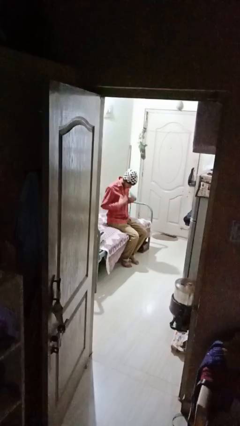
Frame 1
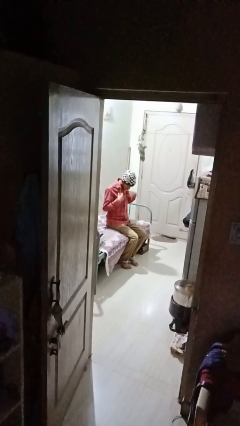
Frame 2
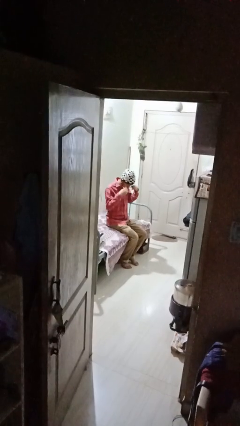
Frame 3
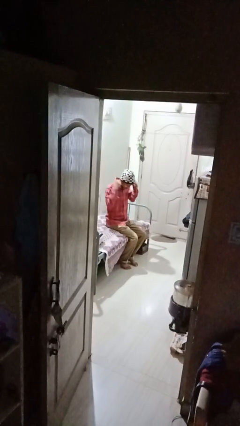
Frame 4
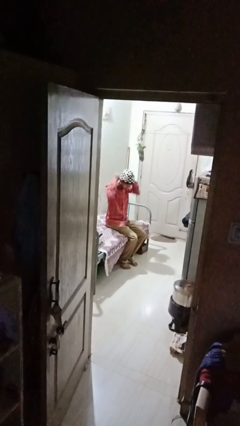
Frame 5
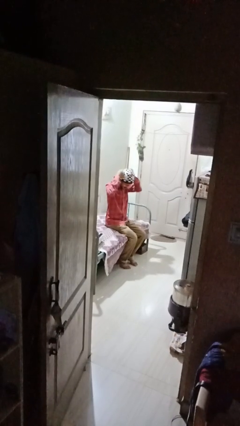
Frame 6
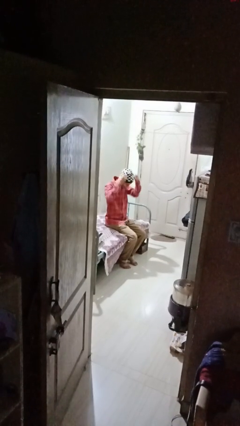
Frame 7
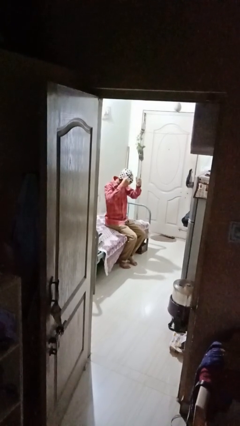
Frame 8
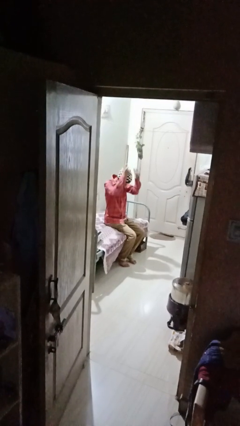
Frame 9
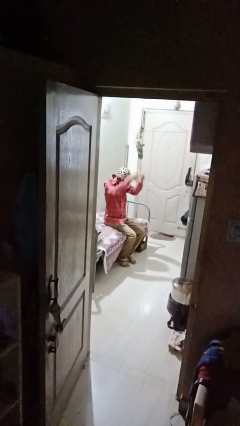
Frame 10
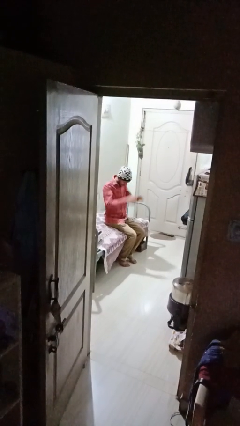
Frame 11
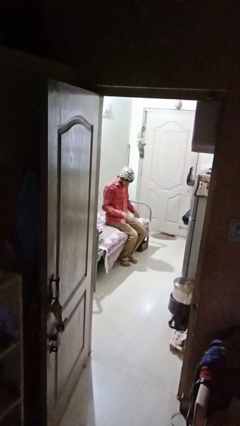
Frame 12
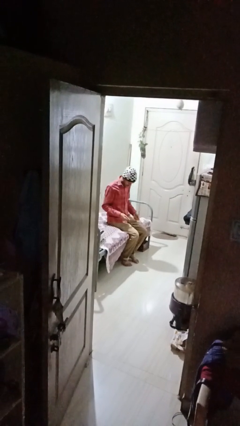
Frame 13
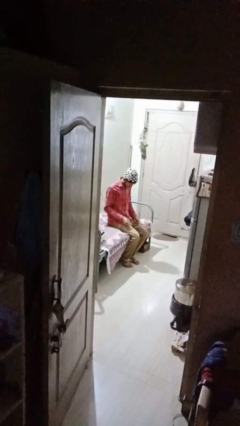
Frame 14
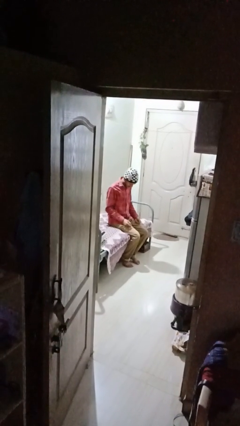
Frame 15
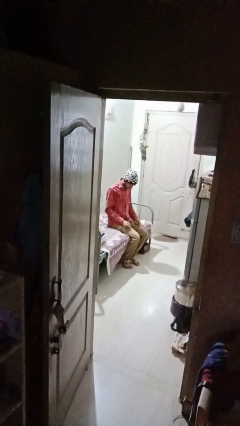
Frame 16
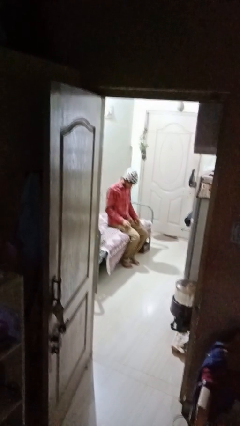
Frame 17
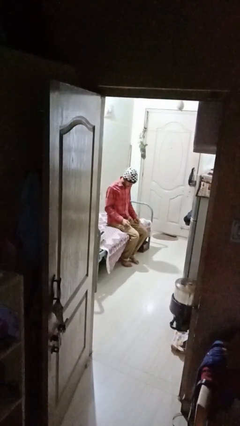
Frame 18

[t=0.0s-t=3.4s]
person takes off necklace

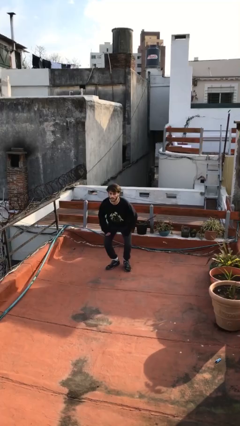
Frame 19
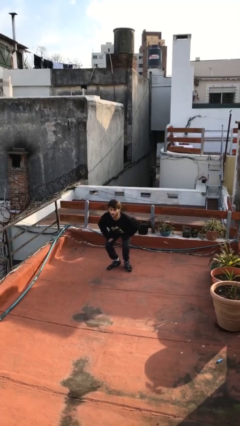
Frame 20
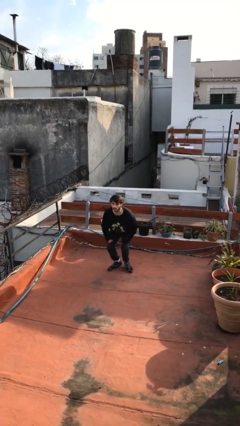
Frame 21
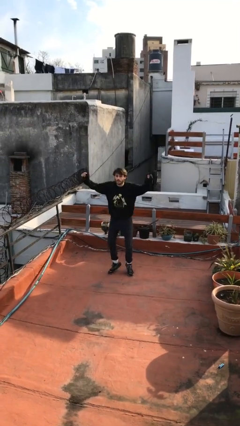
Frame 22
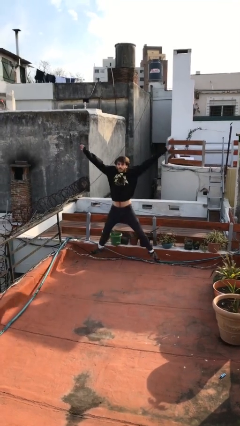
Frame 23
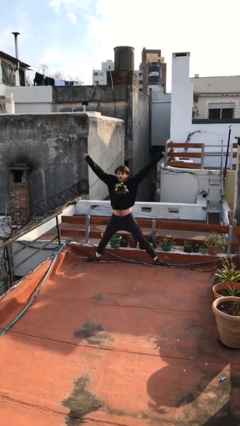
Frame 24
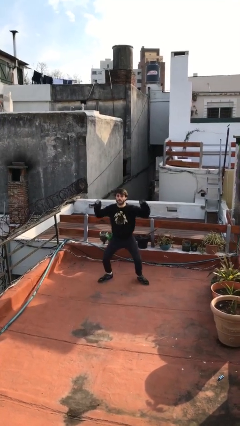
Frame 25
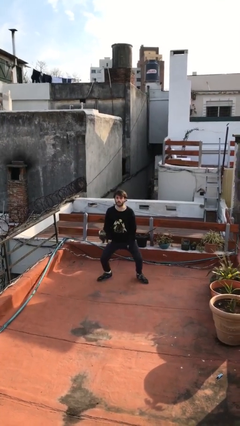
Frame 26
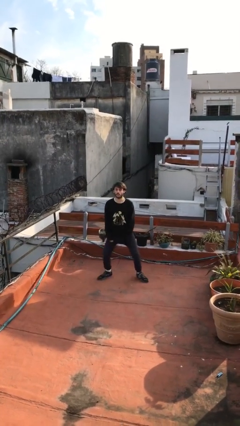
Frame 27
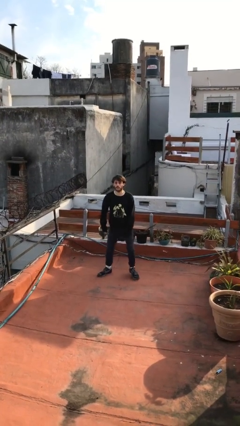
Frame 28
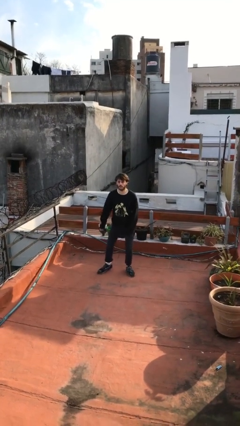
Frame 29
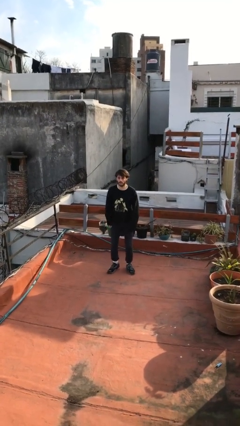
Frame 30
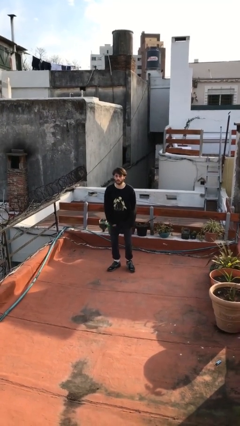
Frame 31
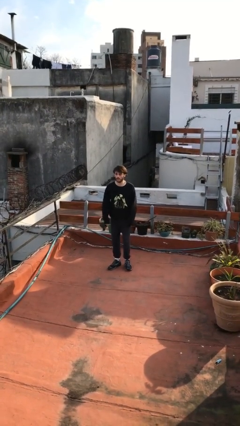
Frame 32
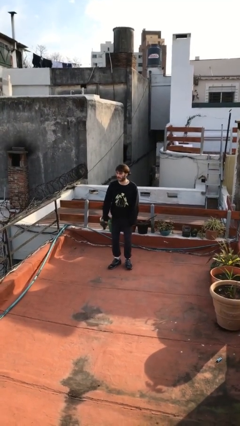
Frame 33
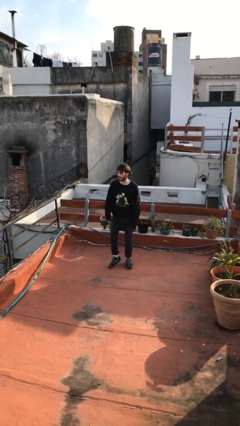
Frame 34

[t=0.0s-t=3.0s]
person exercises with jumping jacks

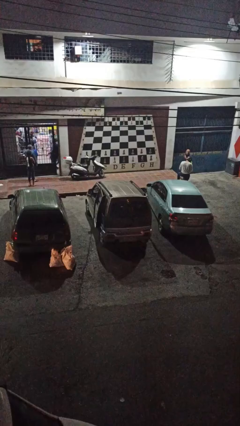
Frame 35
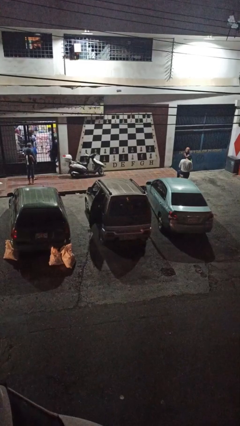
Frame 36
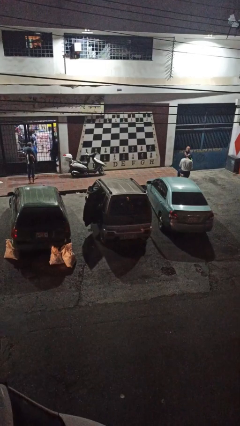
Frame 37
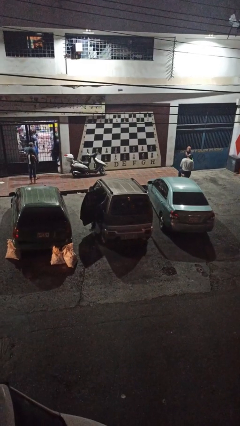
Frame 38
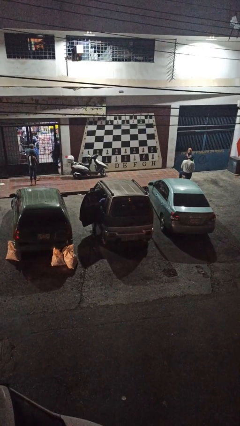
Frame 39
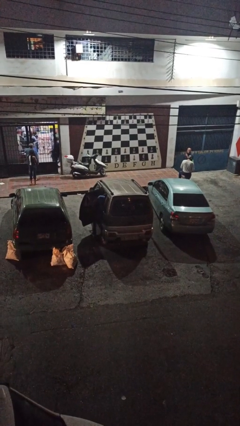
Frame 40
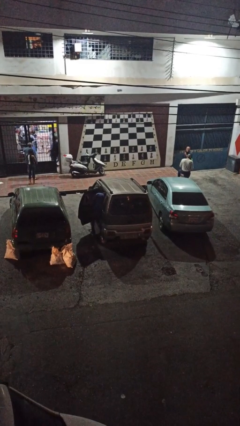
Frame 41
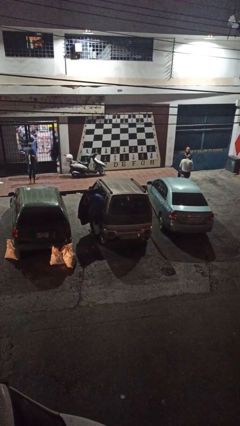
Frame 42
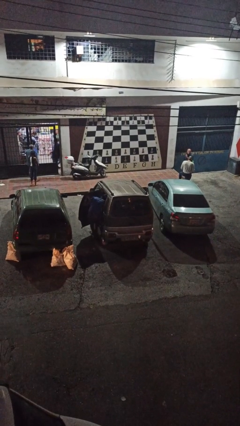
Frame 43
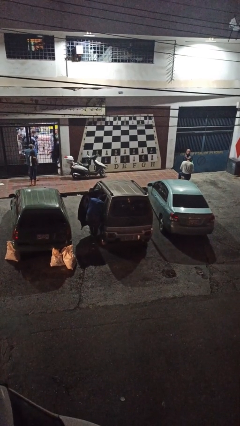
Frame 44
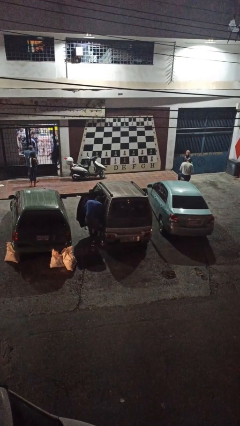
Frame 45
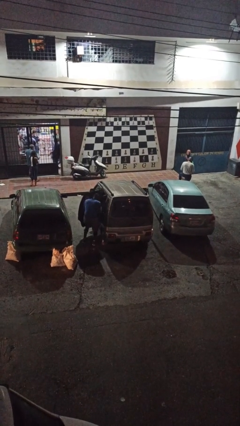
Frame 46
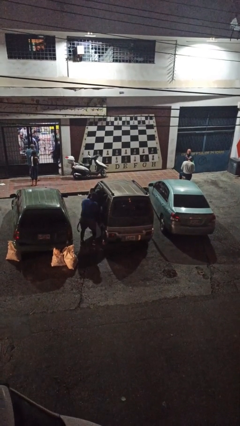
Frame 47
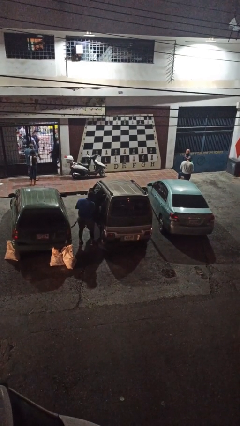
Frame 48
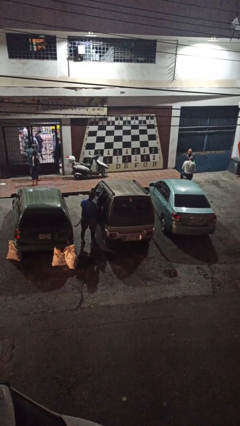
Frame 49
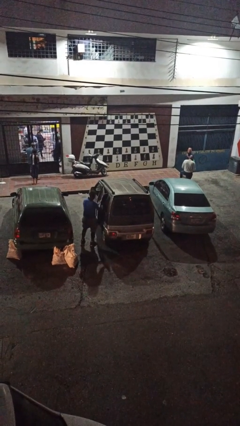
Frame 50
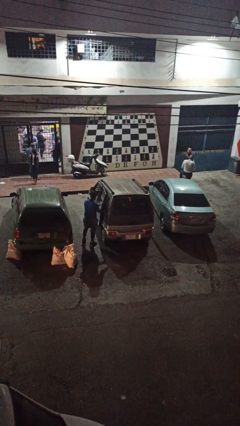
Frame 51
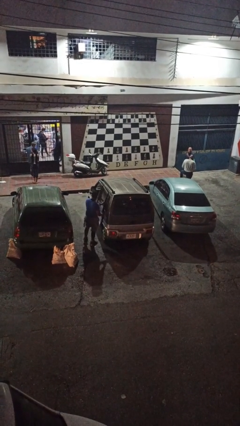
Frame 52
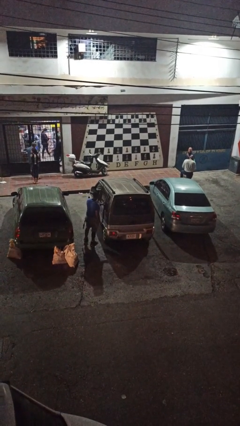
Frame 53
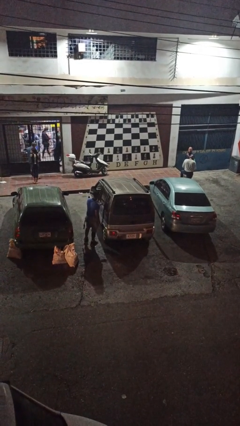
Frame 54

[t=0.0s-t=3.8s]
car drops off person

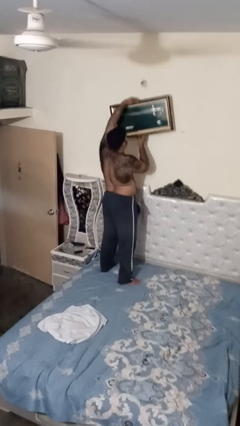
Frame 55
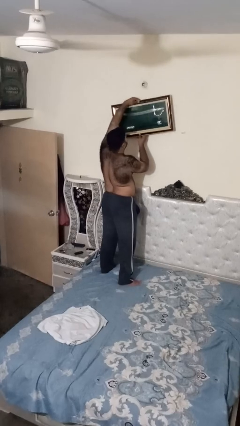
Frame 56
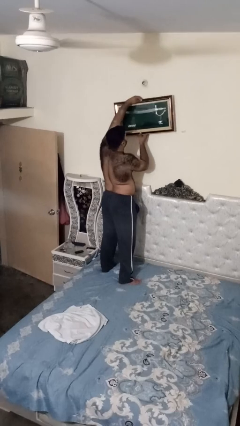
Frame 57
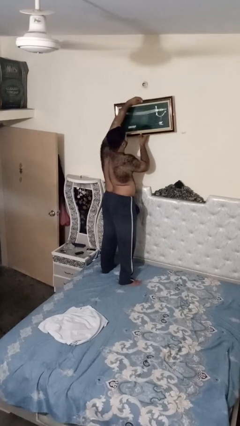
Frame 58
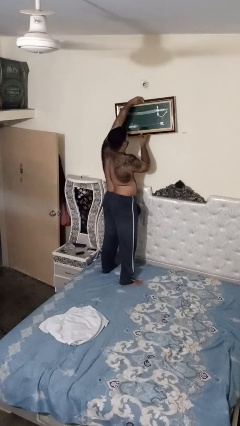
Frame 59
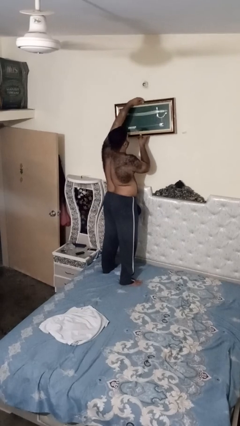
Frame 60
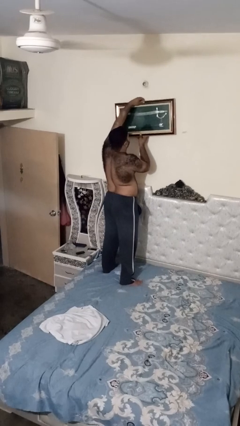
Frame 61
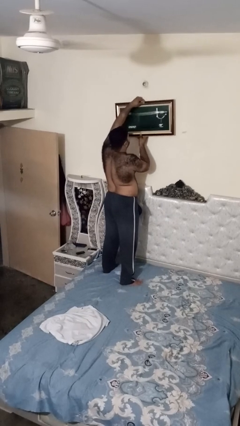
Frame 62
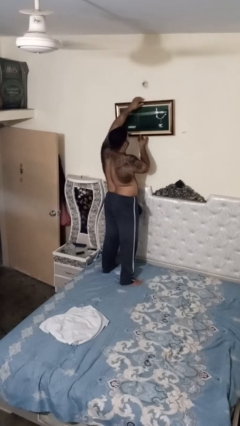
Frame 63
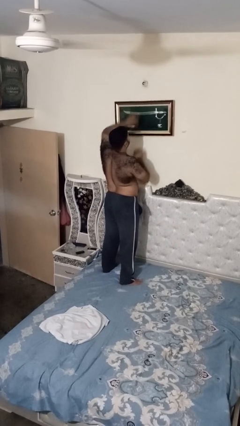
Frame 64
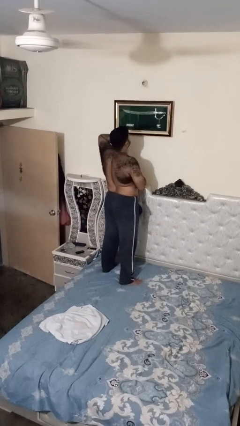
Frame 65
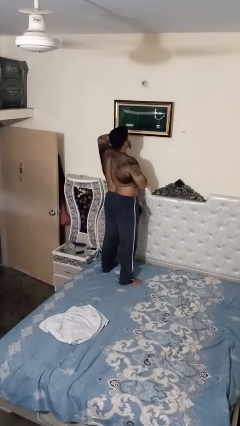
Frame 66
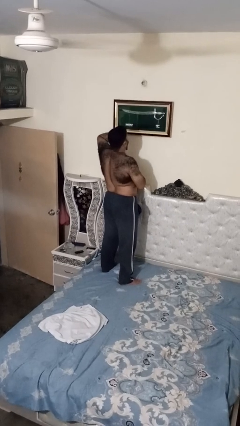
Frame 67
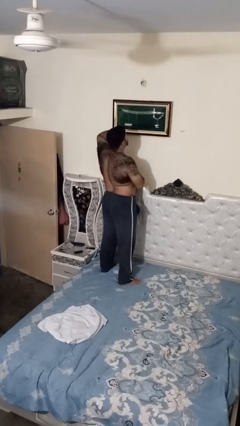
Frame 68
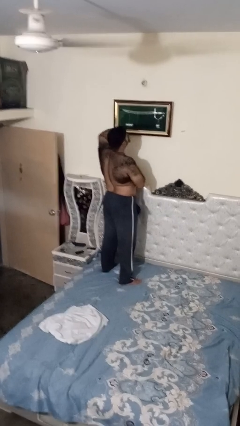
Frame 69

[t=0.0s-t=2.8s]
person puts up picture frame

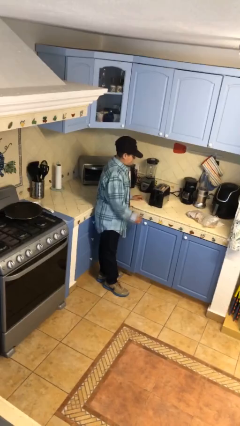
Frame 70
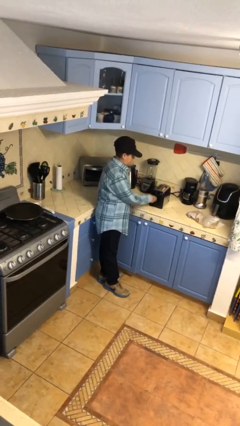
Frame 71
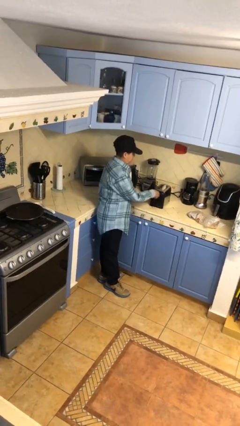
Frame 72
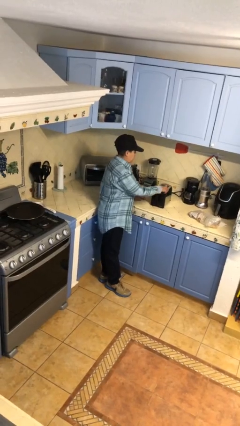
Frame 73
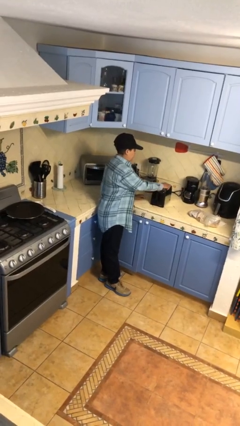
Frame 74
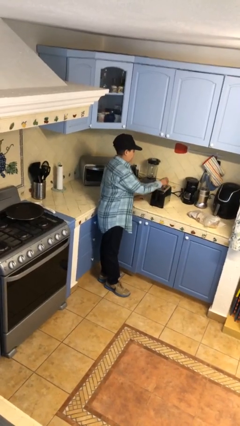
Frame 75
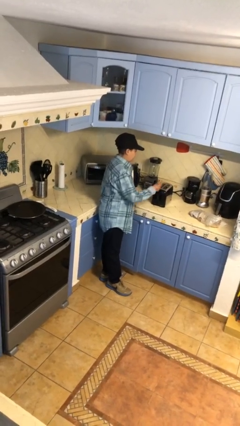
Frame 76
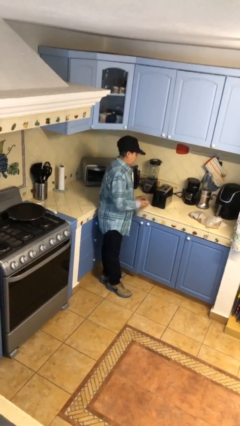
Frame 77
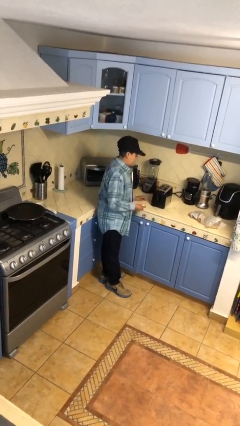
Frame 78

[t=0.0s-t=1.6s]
person takes object from toaster

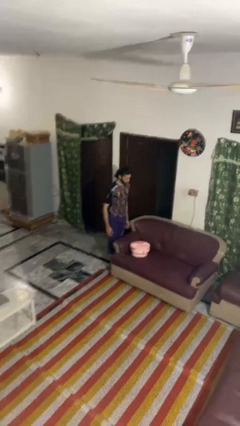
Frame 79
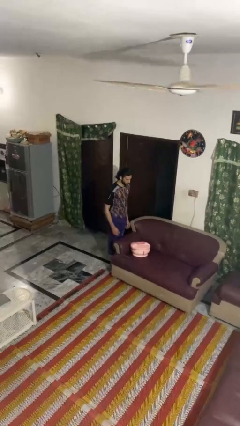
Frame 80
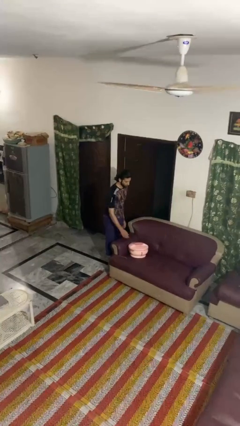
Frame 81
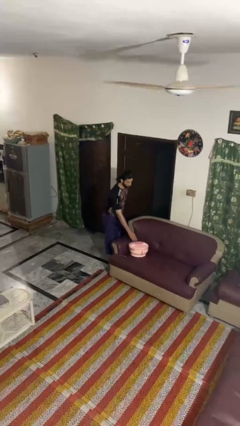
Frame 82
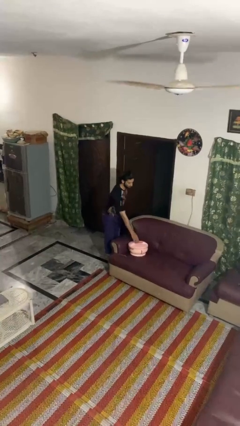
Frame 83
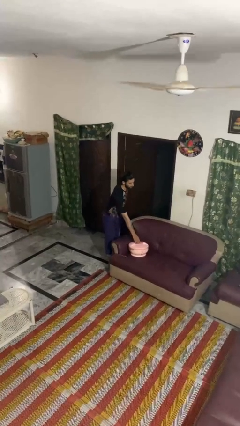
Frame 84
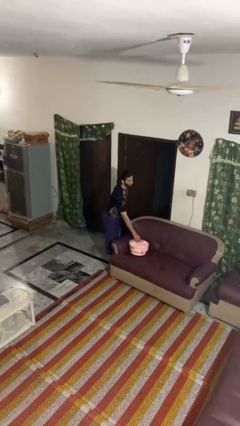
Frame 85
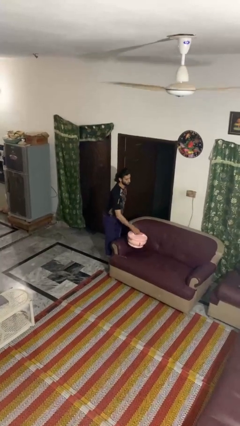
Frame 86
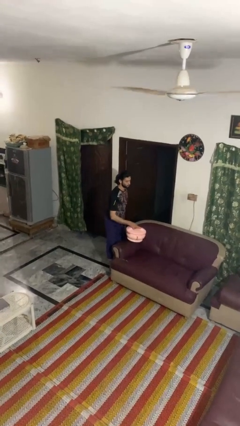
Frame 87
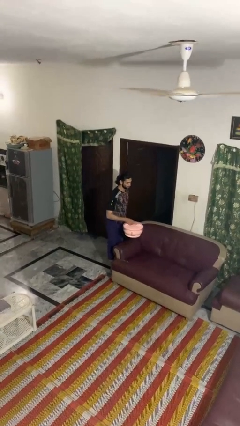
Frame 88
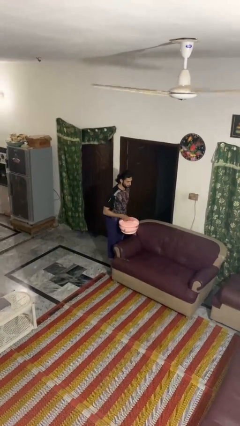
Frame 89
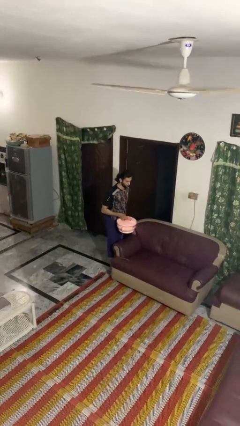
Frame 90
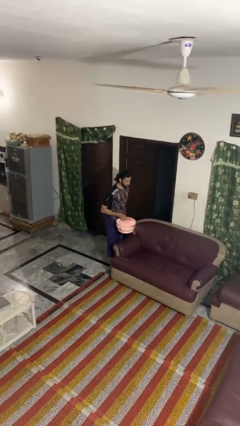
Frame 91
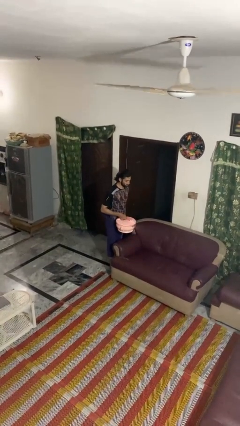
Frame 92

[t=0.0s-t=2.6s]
person picks up object from couch
